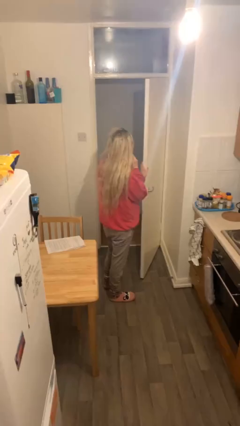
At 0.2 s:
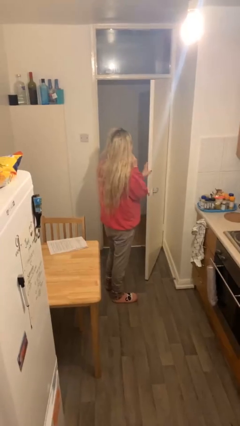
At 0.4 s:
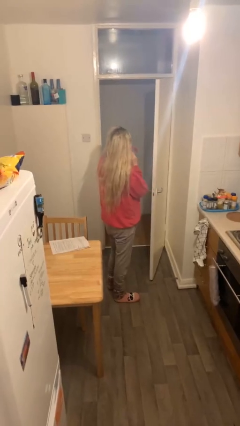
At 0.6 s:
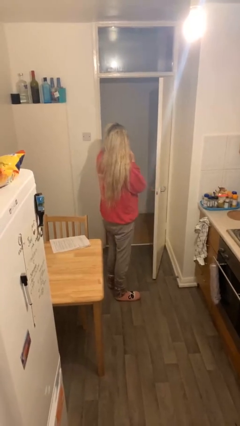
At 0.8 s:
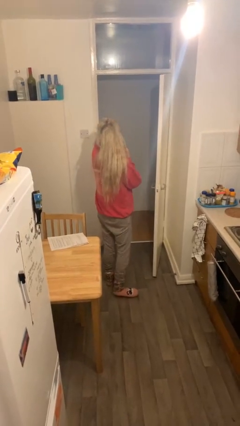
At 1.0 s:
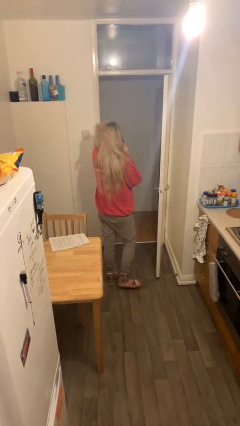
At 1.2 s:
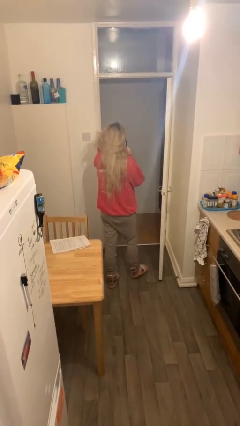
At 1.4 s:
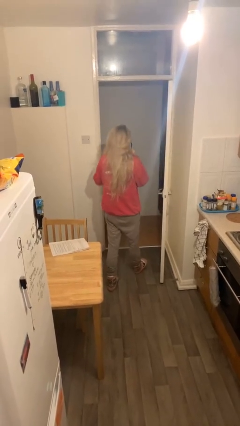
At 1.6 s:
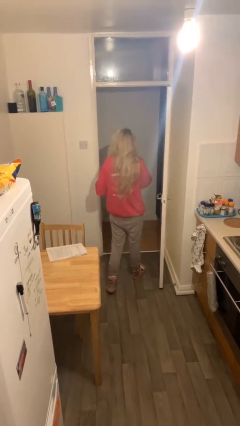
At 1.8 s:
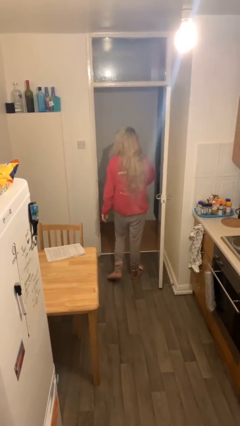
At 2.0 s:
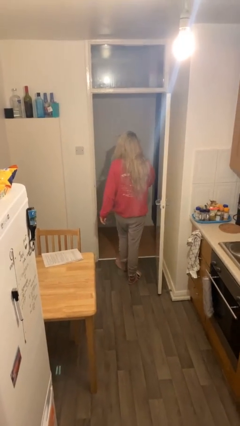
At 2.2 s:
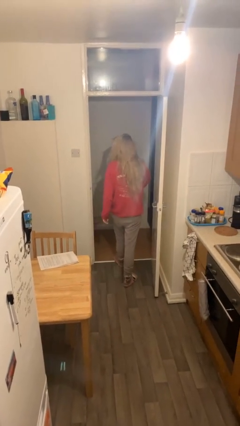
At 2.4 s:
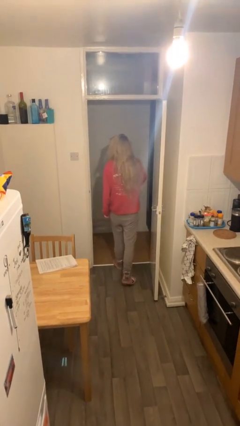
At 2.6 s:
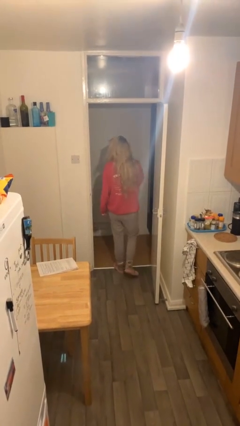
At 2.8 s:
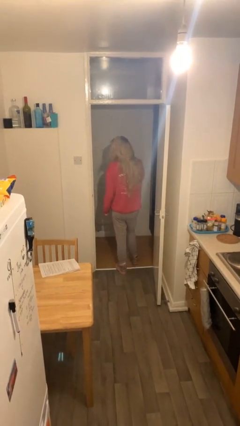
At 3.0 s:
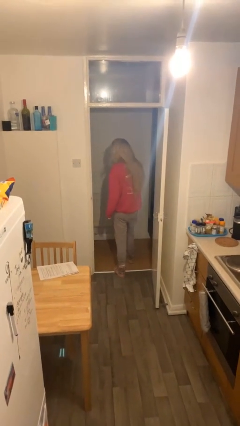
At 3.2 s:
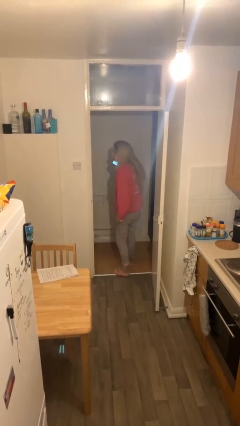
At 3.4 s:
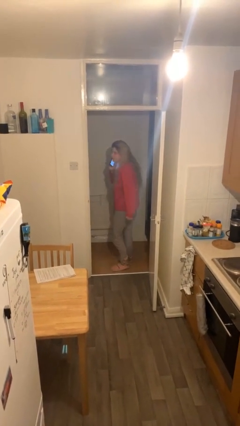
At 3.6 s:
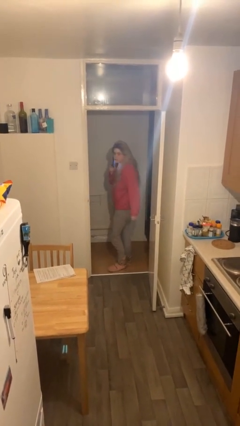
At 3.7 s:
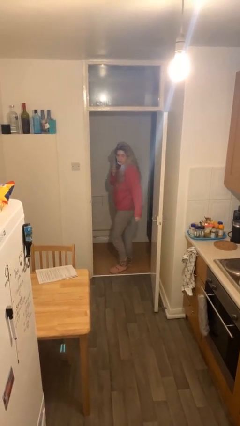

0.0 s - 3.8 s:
person exits scene through structure

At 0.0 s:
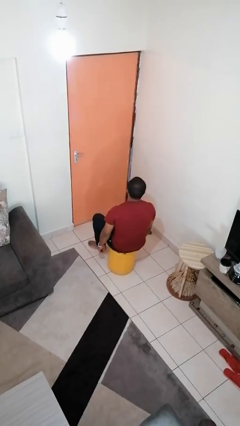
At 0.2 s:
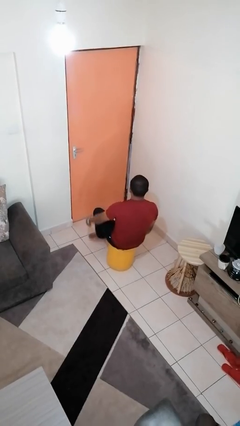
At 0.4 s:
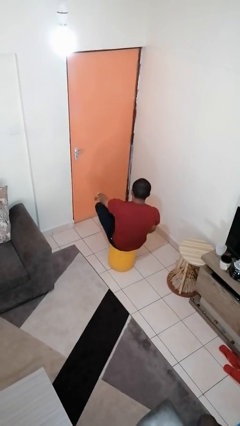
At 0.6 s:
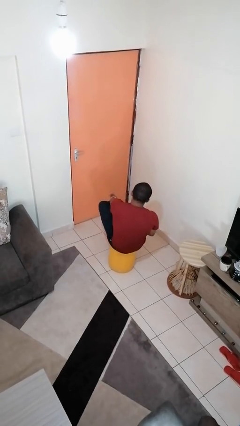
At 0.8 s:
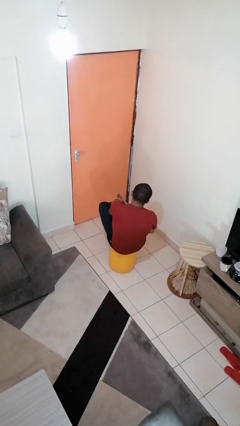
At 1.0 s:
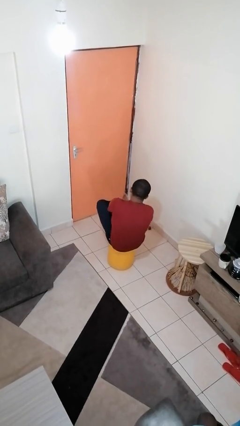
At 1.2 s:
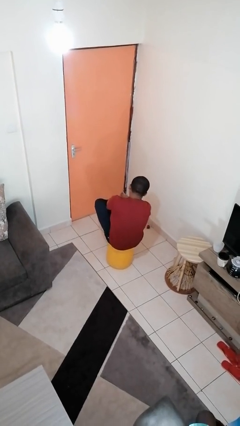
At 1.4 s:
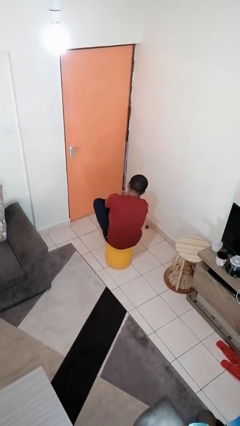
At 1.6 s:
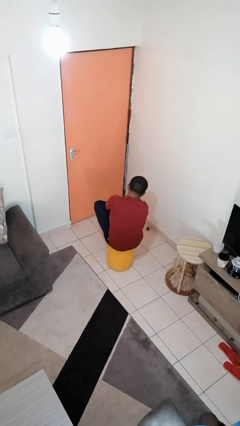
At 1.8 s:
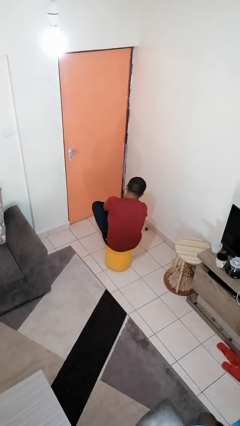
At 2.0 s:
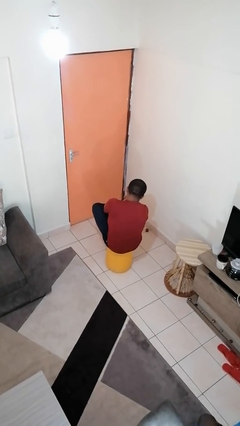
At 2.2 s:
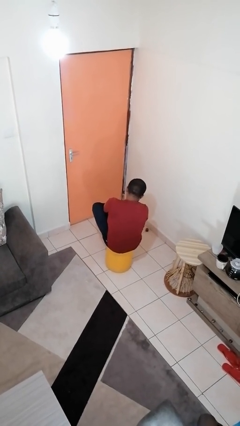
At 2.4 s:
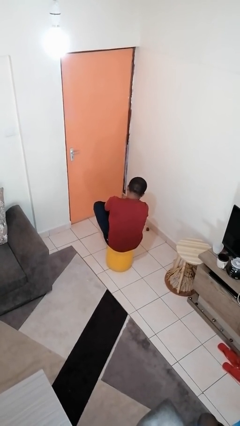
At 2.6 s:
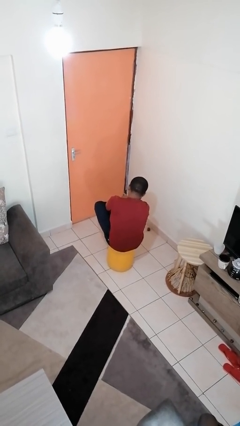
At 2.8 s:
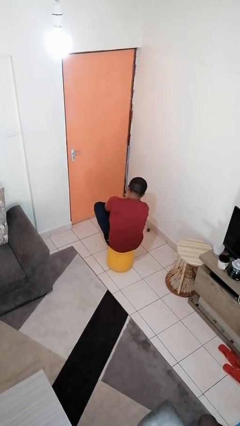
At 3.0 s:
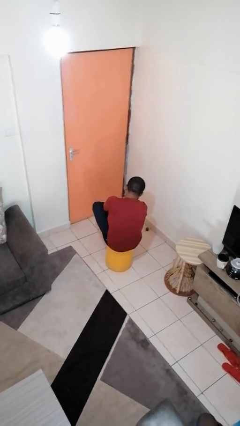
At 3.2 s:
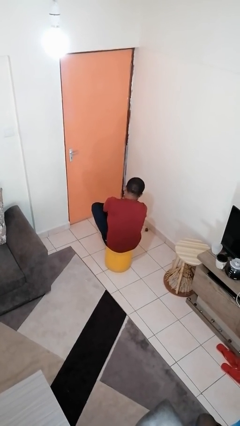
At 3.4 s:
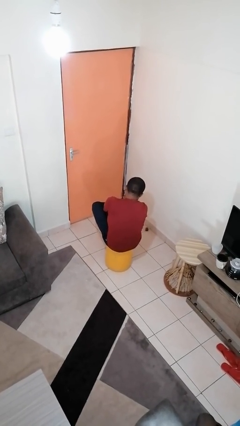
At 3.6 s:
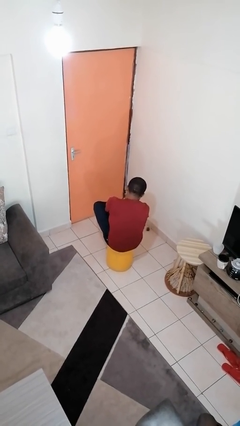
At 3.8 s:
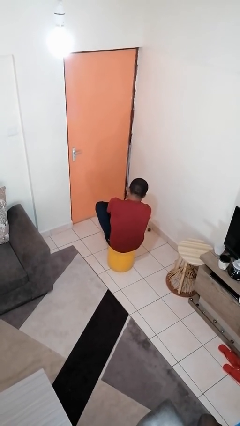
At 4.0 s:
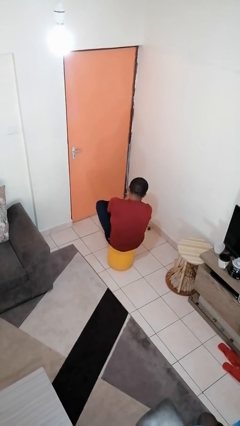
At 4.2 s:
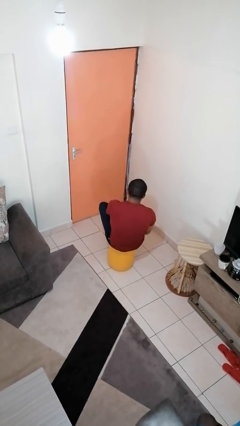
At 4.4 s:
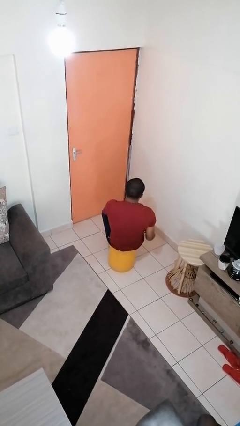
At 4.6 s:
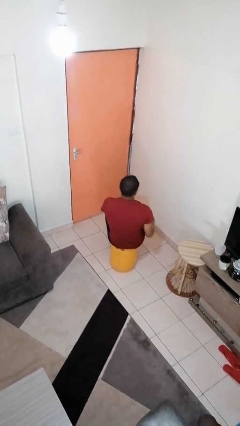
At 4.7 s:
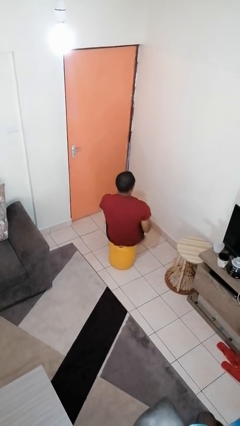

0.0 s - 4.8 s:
person rubs foot

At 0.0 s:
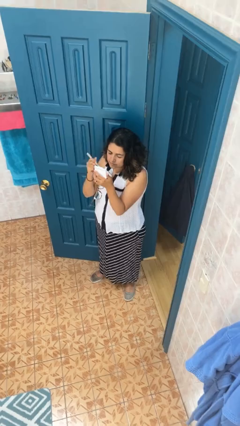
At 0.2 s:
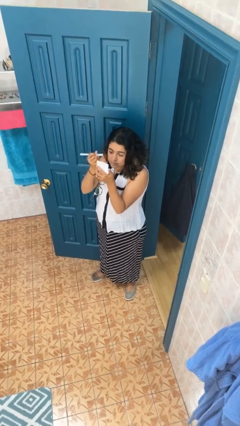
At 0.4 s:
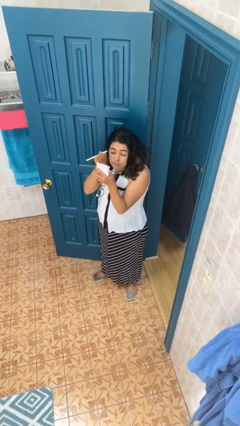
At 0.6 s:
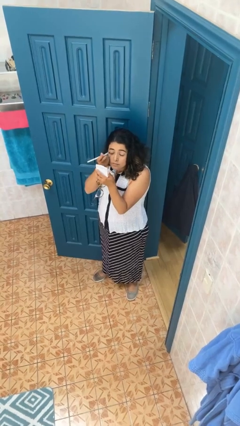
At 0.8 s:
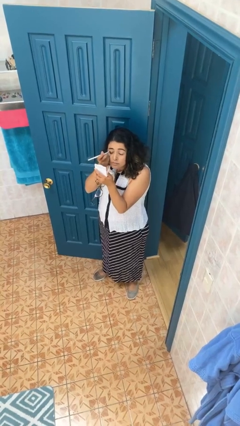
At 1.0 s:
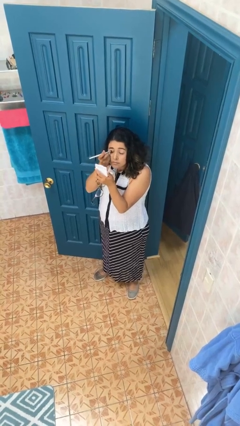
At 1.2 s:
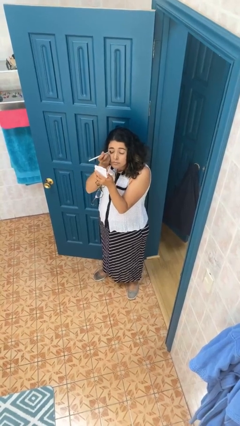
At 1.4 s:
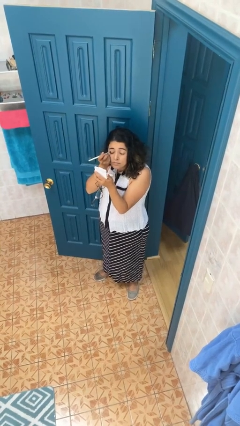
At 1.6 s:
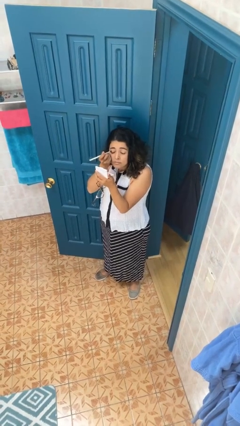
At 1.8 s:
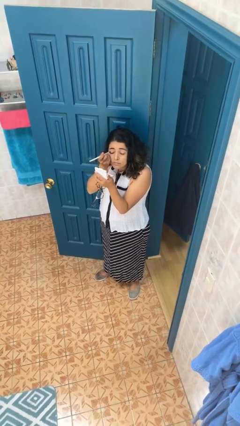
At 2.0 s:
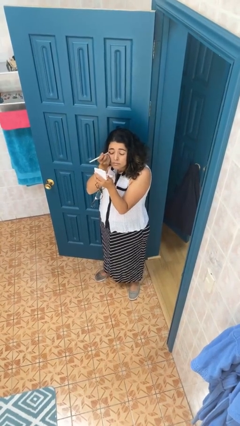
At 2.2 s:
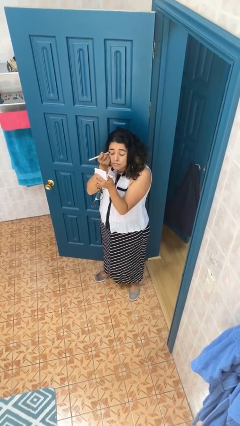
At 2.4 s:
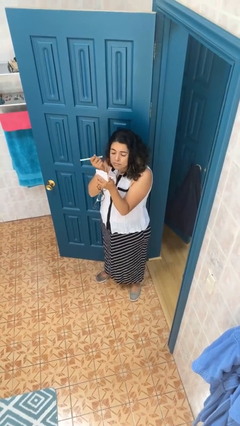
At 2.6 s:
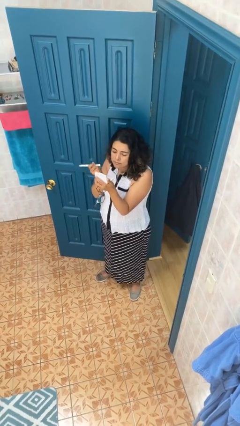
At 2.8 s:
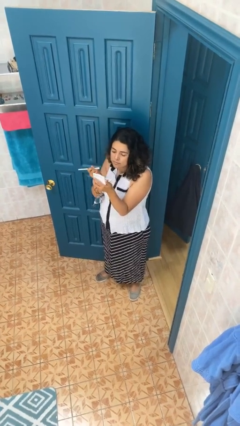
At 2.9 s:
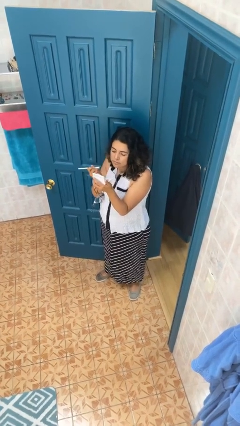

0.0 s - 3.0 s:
person applies eye makeup

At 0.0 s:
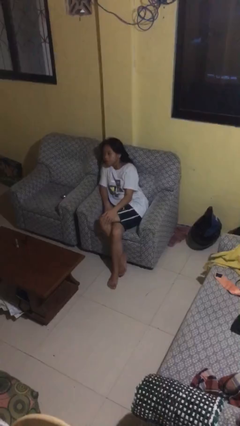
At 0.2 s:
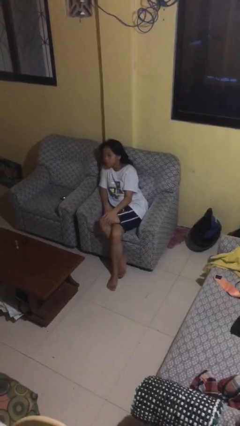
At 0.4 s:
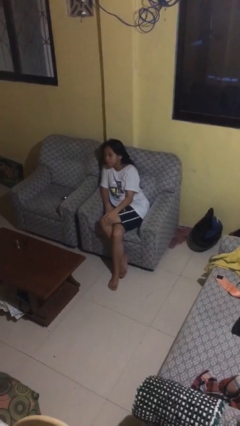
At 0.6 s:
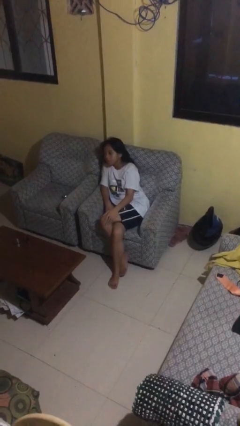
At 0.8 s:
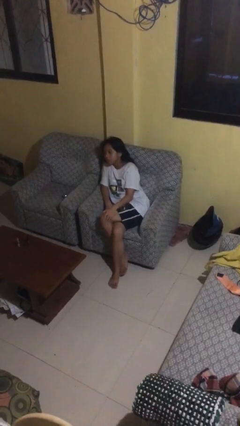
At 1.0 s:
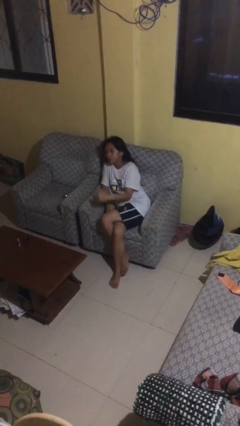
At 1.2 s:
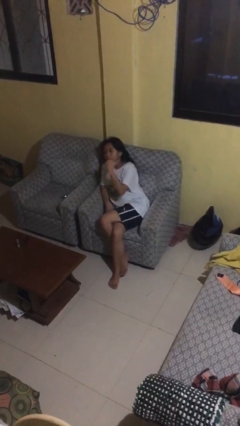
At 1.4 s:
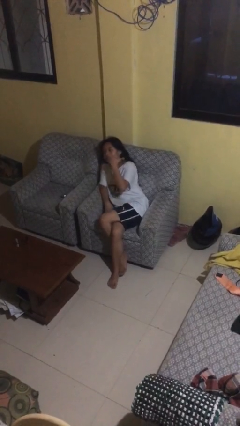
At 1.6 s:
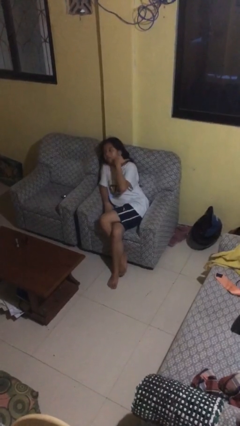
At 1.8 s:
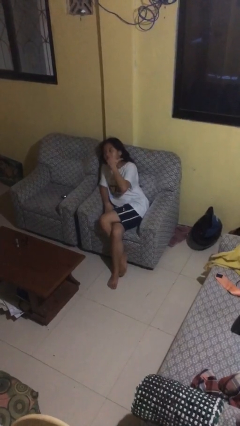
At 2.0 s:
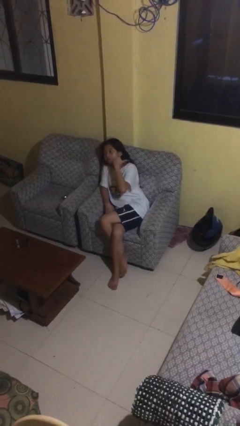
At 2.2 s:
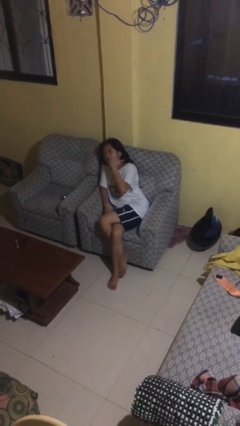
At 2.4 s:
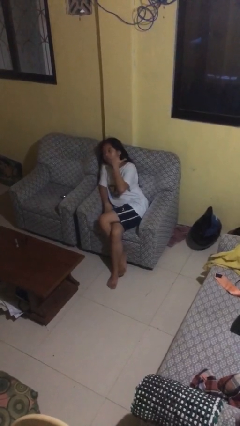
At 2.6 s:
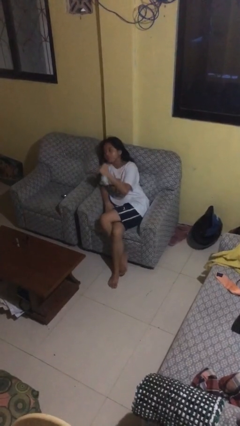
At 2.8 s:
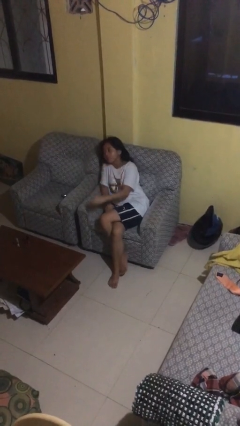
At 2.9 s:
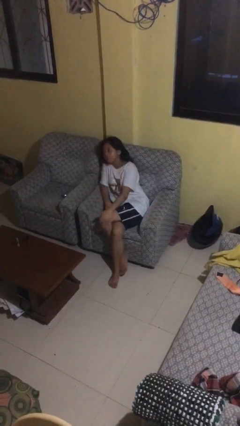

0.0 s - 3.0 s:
person gestures behind me

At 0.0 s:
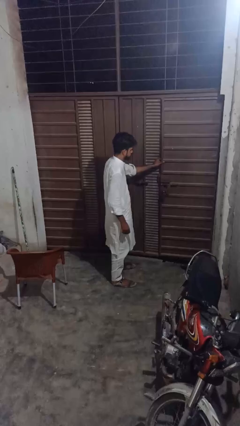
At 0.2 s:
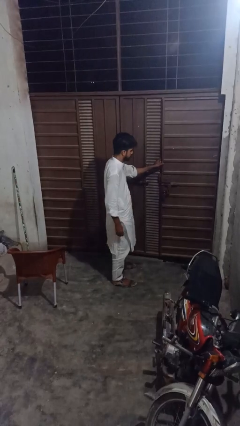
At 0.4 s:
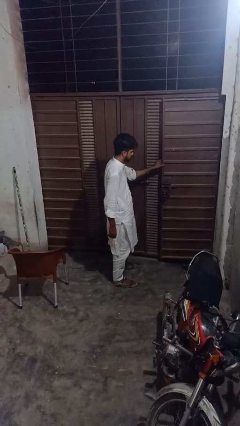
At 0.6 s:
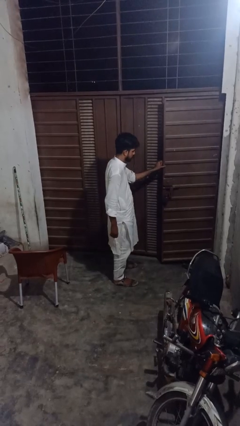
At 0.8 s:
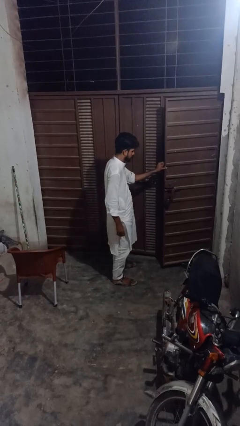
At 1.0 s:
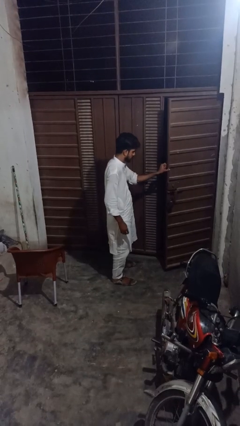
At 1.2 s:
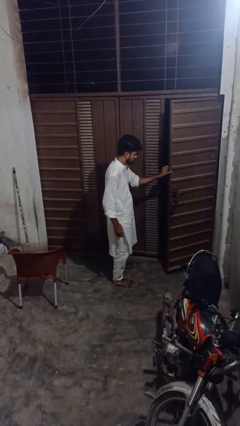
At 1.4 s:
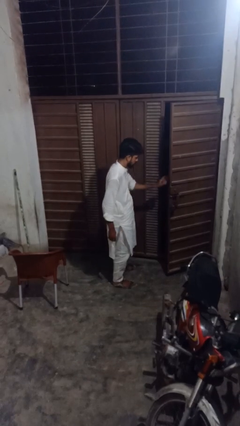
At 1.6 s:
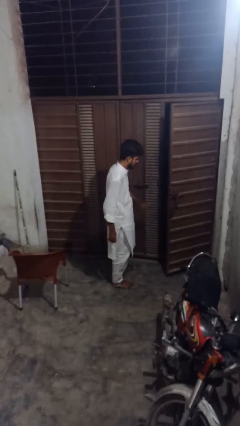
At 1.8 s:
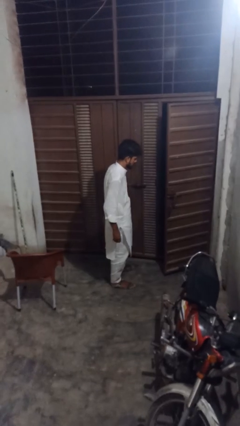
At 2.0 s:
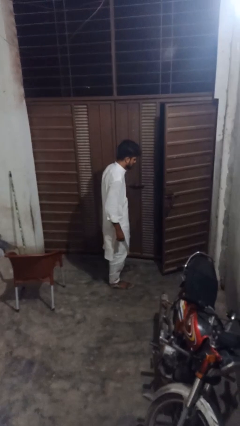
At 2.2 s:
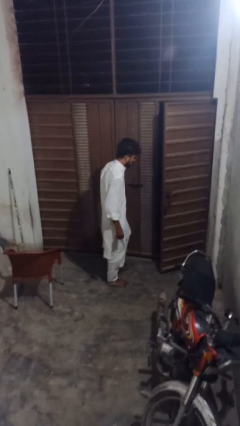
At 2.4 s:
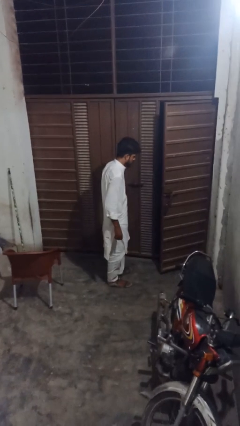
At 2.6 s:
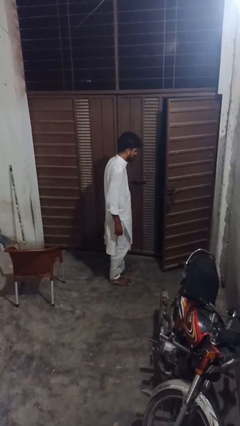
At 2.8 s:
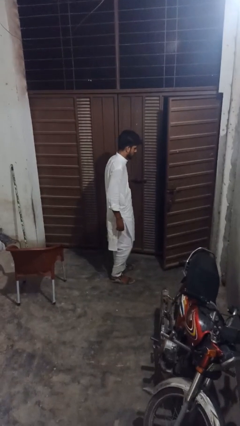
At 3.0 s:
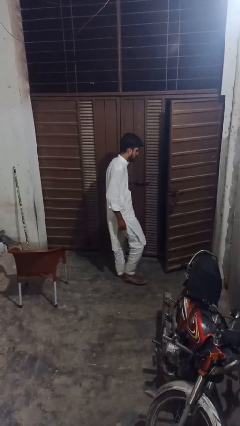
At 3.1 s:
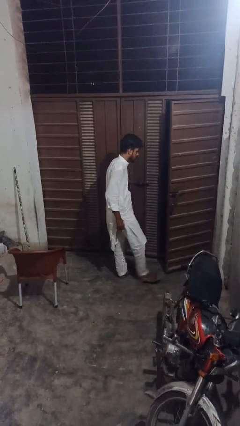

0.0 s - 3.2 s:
person opens facility door
